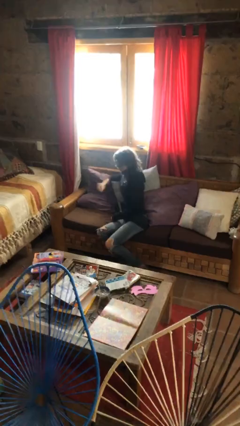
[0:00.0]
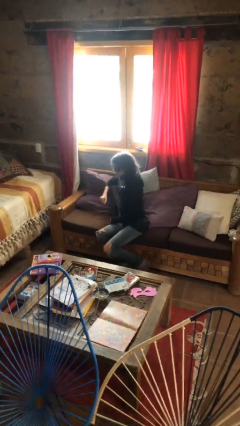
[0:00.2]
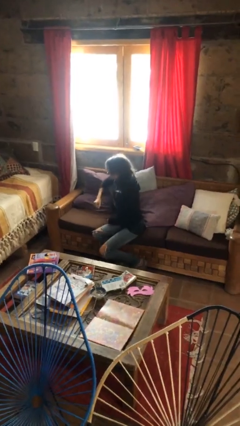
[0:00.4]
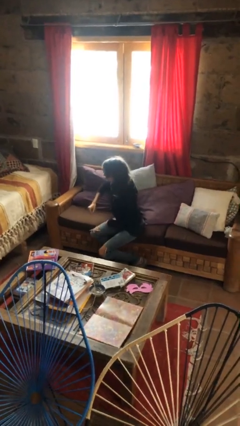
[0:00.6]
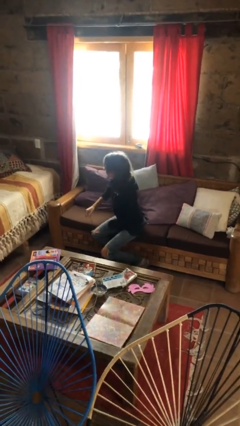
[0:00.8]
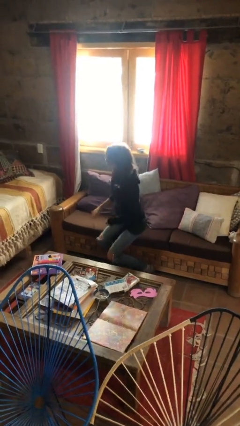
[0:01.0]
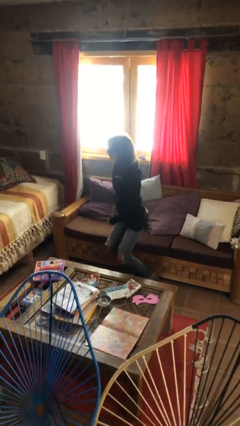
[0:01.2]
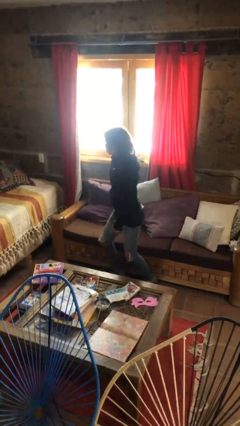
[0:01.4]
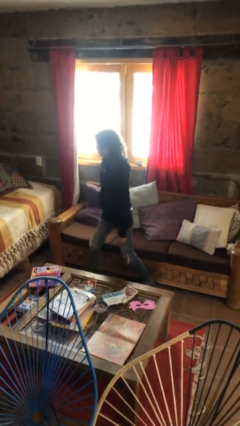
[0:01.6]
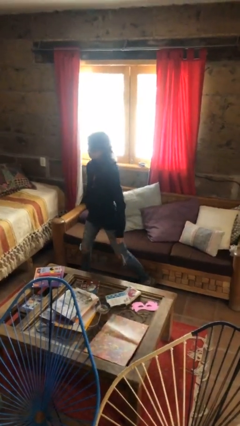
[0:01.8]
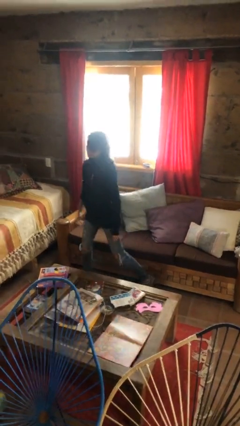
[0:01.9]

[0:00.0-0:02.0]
person stands up

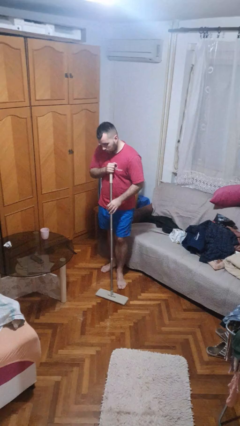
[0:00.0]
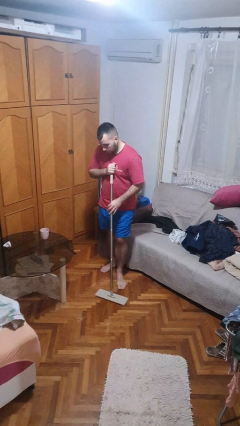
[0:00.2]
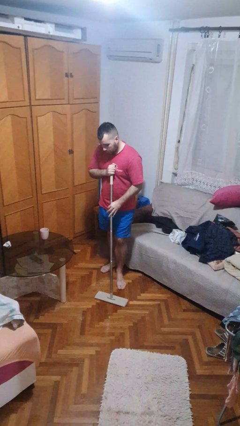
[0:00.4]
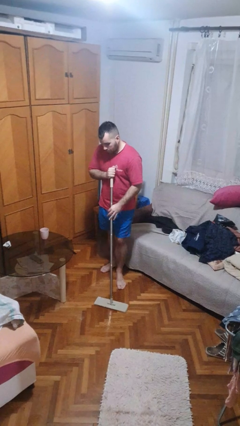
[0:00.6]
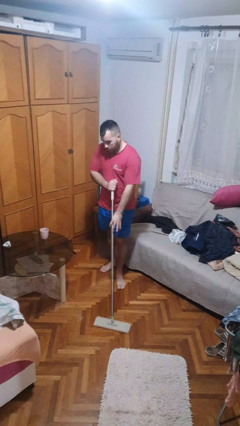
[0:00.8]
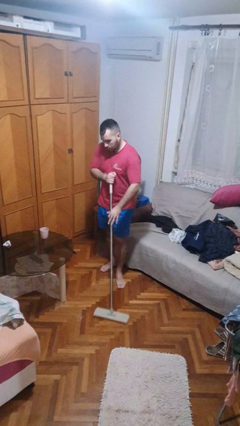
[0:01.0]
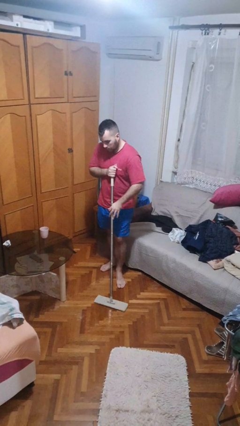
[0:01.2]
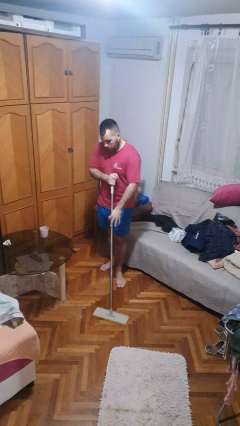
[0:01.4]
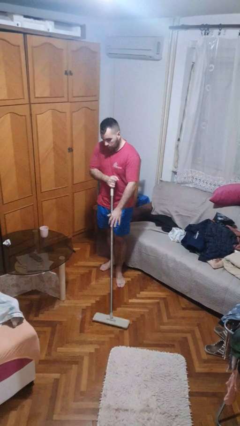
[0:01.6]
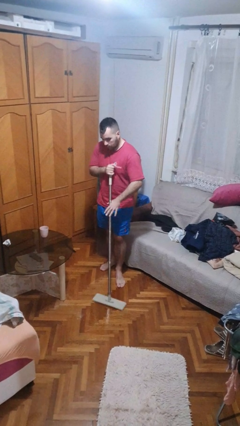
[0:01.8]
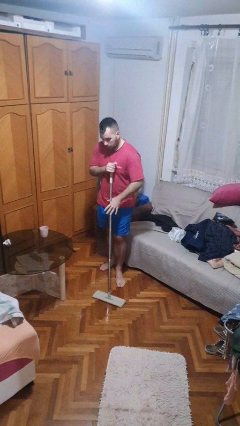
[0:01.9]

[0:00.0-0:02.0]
person mops

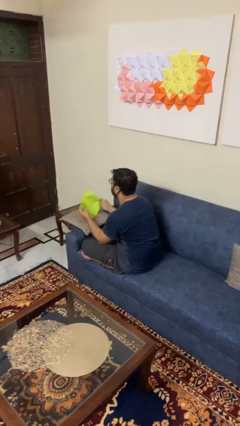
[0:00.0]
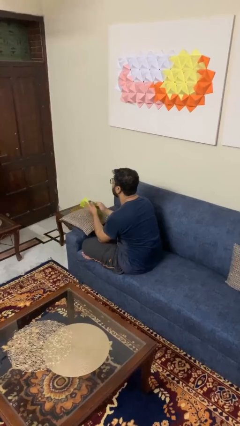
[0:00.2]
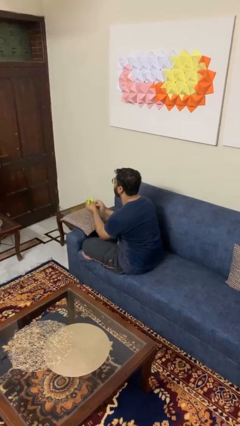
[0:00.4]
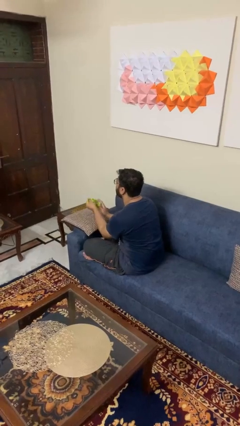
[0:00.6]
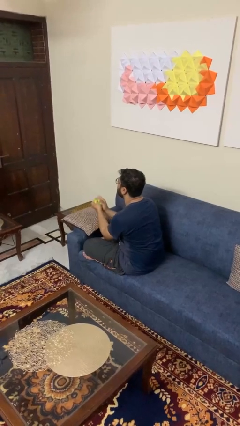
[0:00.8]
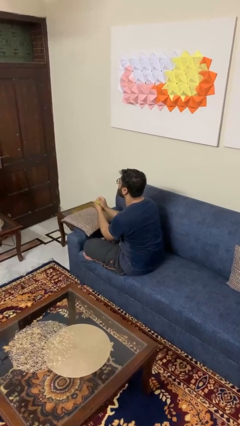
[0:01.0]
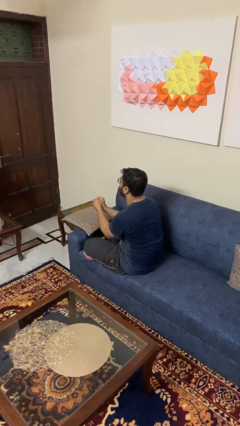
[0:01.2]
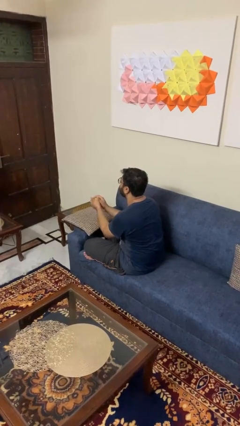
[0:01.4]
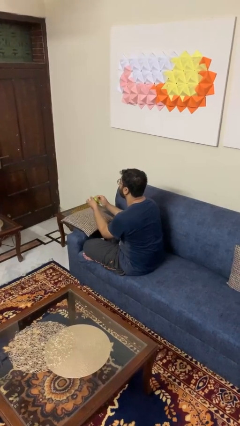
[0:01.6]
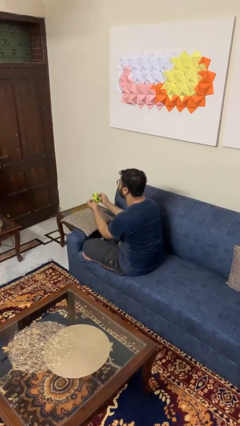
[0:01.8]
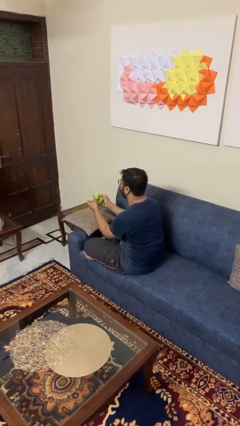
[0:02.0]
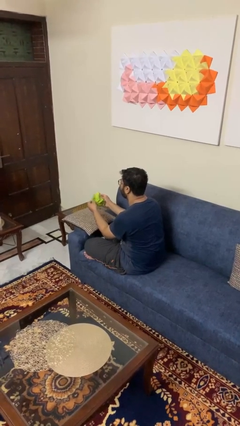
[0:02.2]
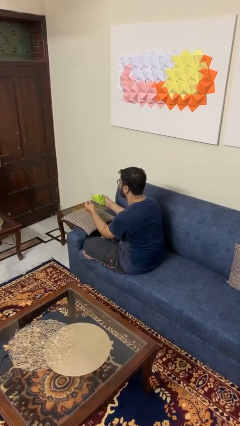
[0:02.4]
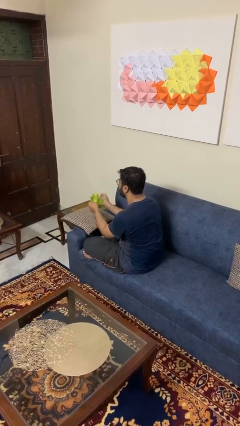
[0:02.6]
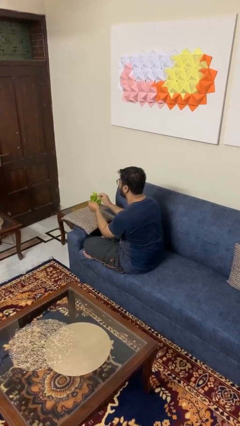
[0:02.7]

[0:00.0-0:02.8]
person crumples paper

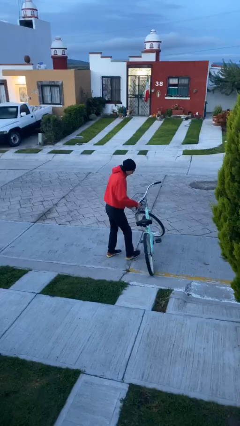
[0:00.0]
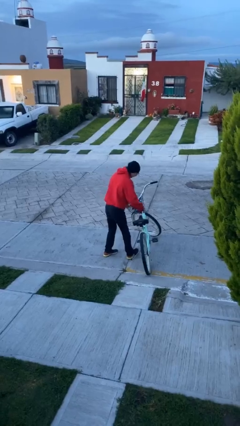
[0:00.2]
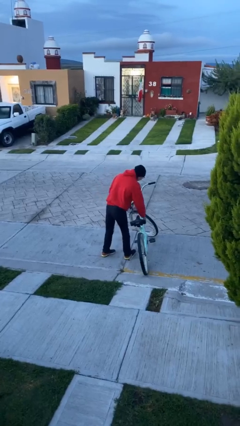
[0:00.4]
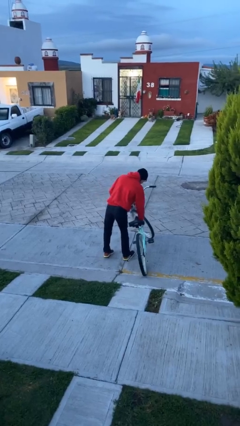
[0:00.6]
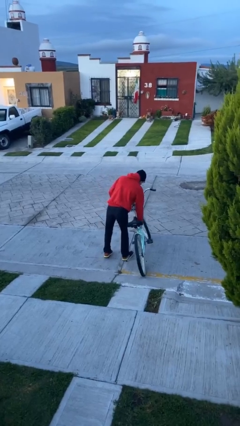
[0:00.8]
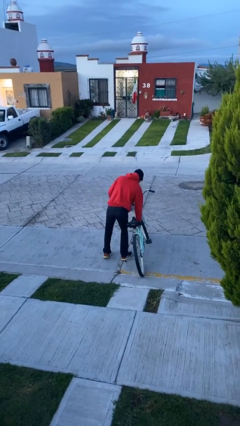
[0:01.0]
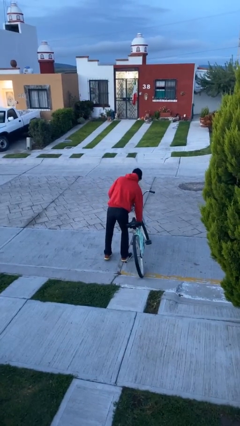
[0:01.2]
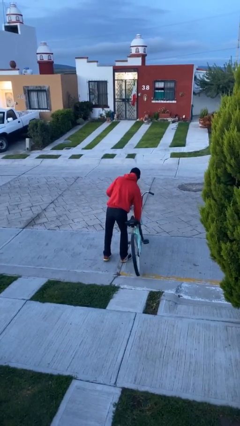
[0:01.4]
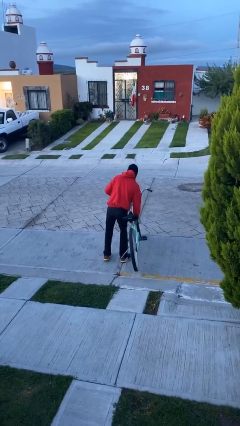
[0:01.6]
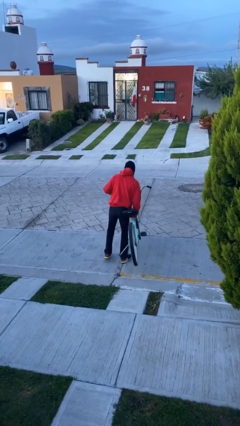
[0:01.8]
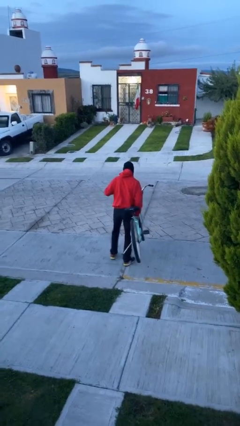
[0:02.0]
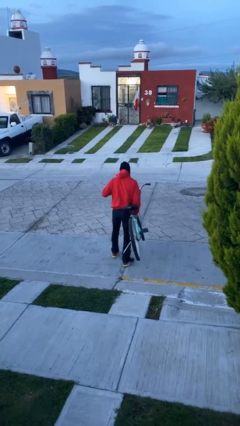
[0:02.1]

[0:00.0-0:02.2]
person picks up object from floor

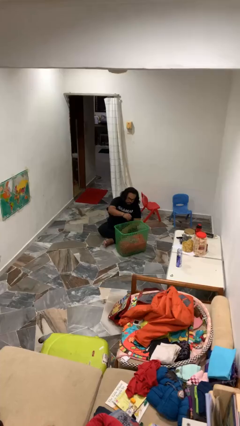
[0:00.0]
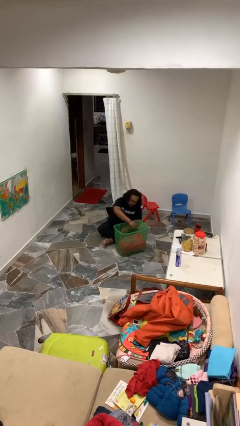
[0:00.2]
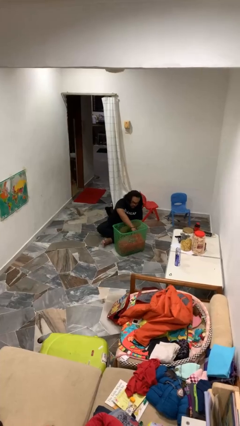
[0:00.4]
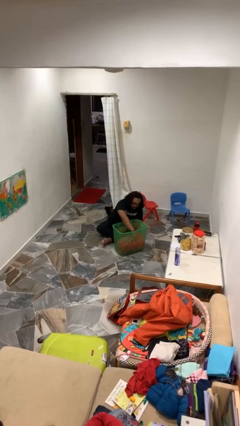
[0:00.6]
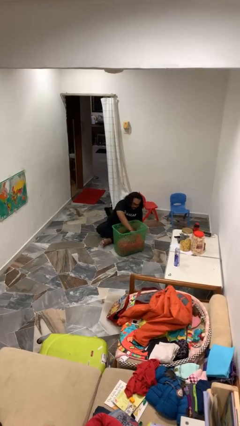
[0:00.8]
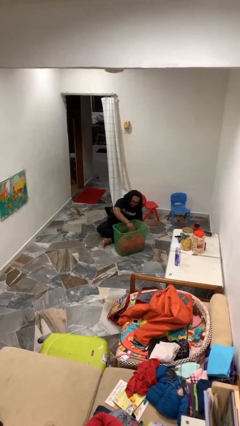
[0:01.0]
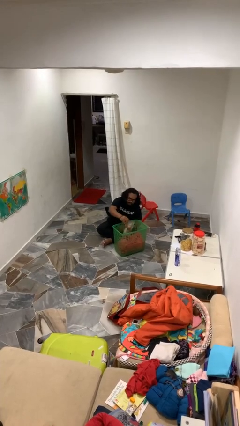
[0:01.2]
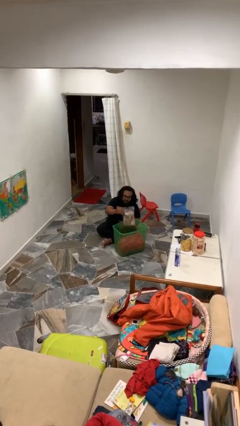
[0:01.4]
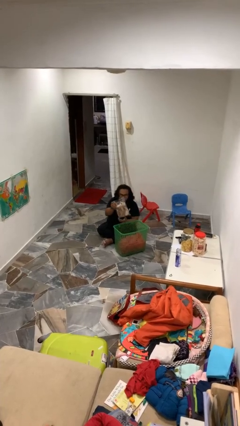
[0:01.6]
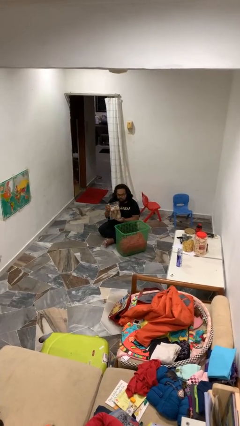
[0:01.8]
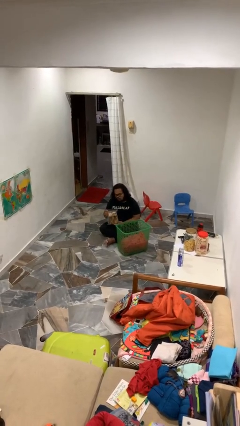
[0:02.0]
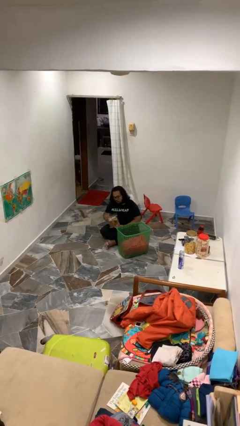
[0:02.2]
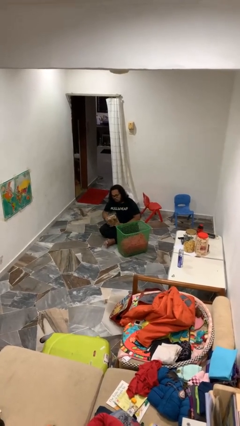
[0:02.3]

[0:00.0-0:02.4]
person takes object from basket

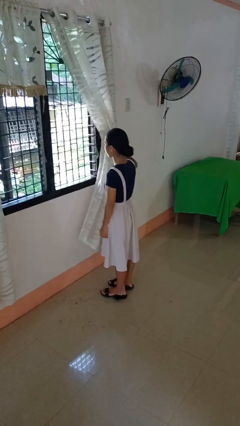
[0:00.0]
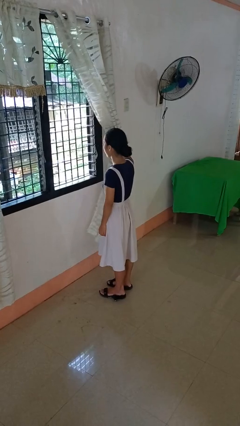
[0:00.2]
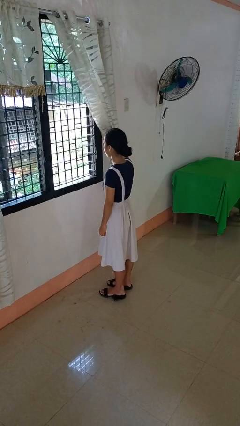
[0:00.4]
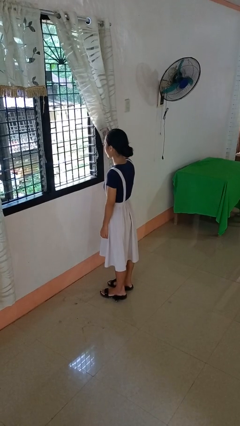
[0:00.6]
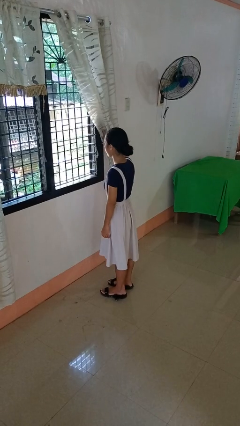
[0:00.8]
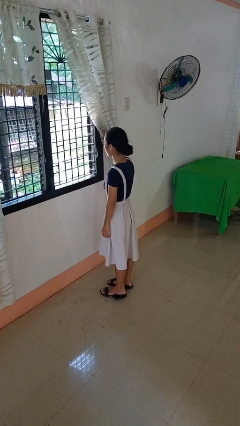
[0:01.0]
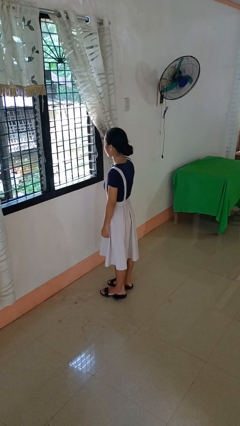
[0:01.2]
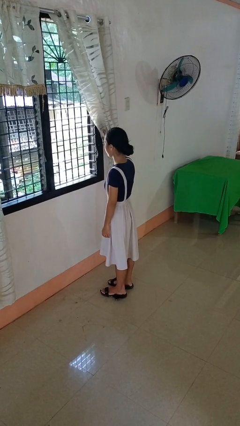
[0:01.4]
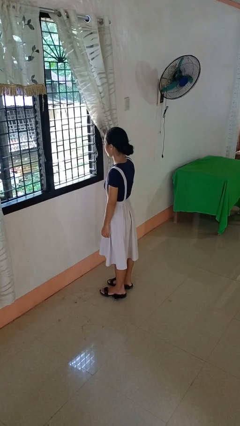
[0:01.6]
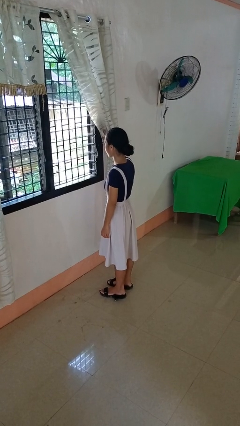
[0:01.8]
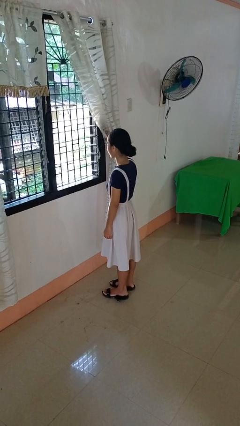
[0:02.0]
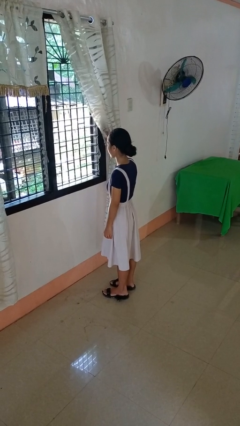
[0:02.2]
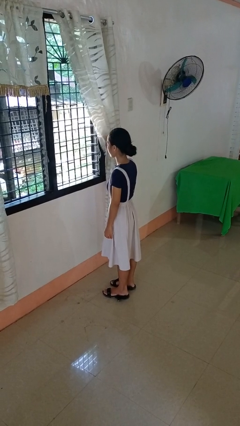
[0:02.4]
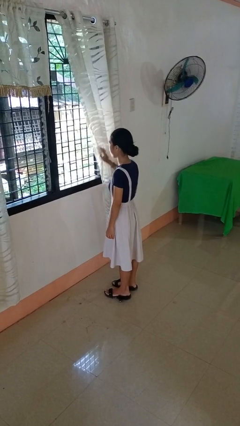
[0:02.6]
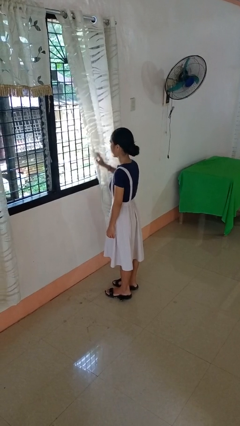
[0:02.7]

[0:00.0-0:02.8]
person opens curtains

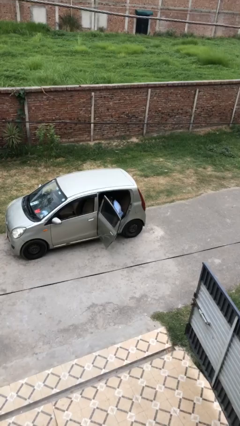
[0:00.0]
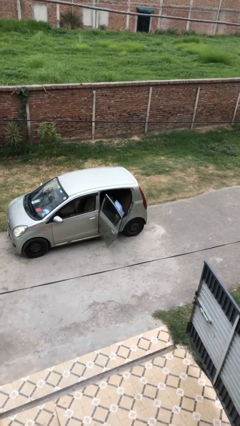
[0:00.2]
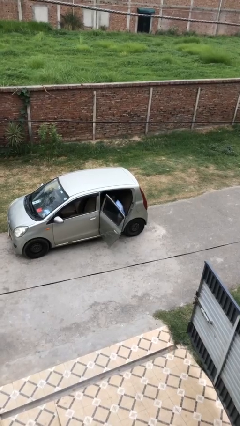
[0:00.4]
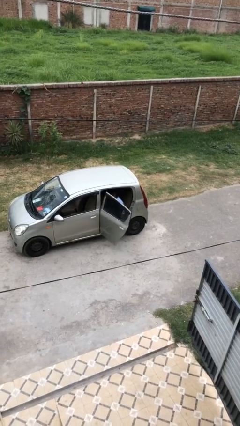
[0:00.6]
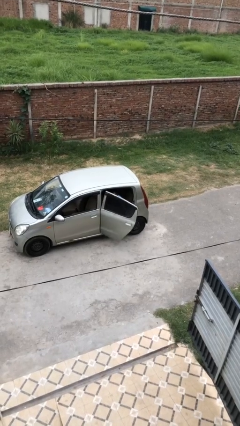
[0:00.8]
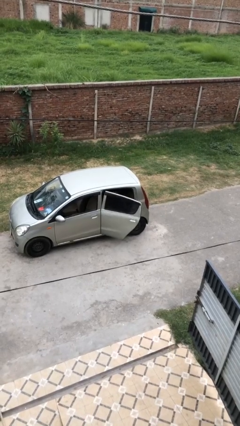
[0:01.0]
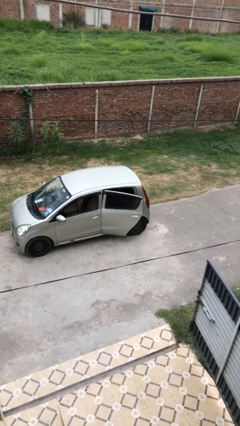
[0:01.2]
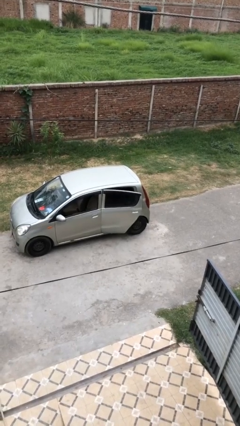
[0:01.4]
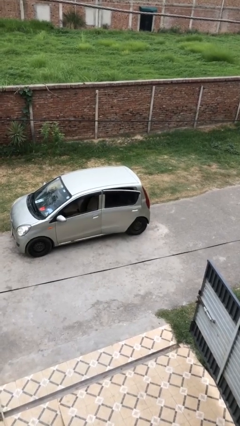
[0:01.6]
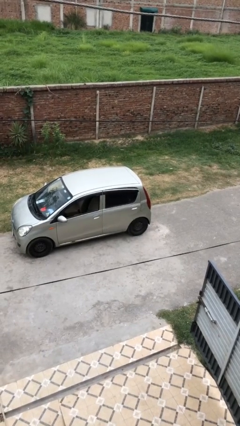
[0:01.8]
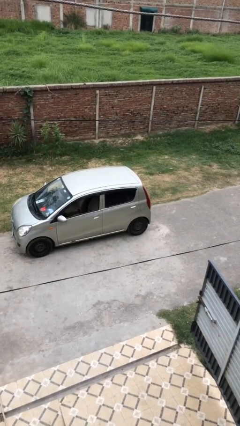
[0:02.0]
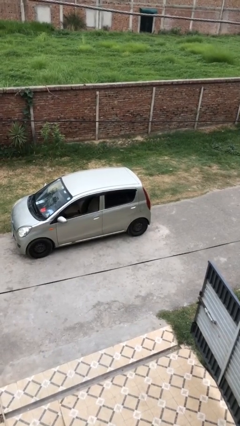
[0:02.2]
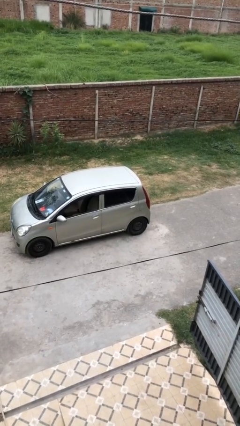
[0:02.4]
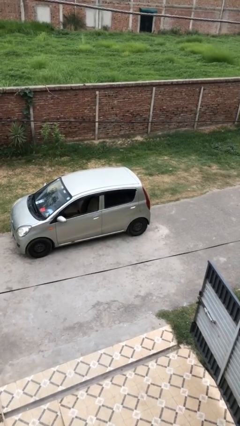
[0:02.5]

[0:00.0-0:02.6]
person closes car door

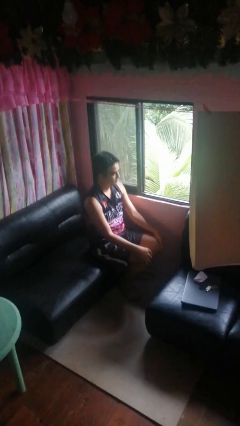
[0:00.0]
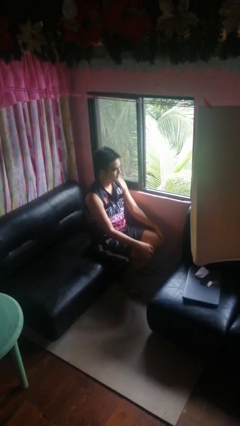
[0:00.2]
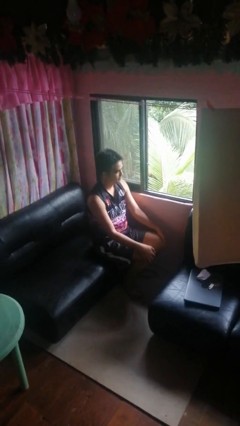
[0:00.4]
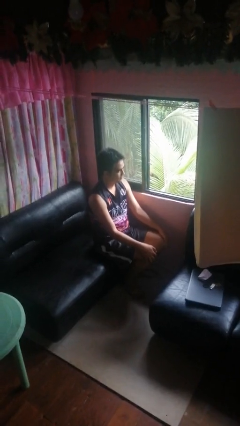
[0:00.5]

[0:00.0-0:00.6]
person gestures behind me
